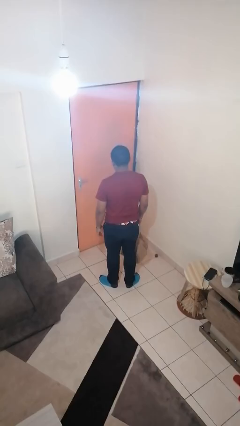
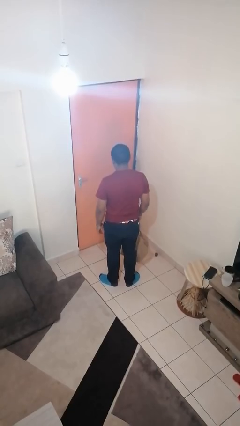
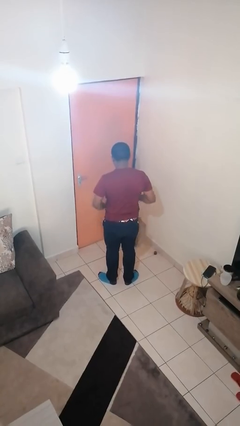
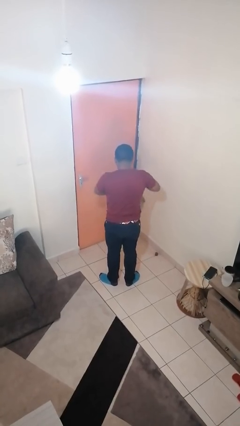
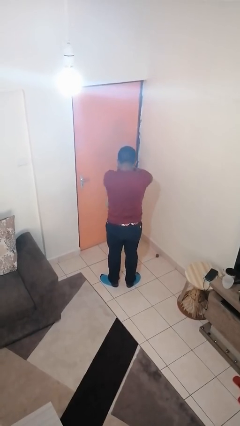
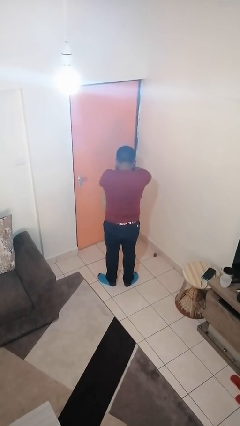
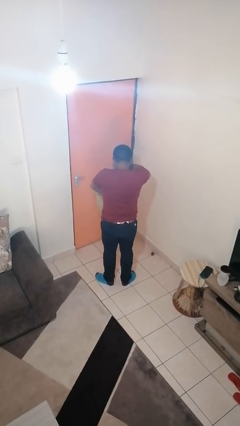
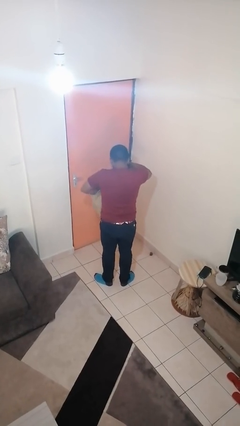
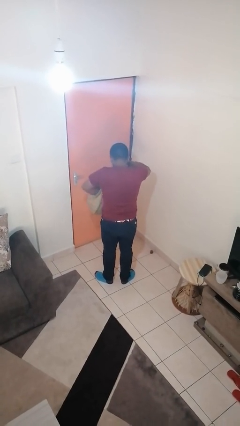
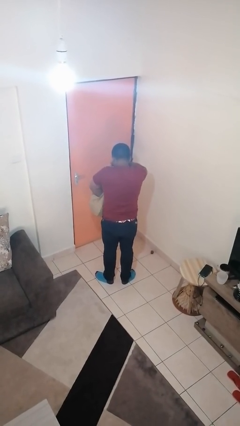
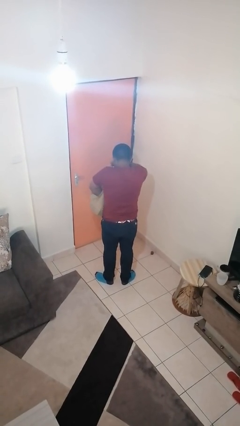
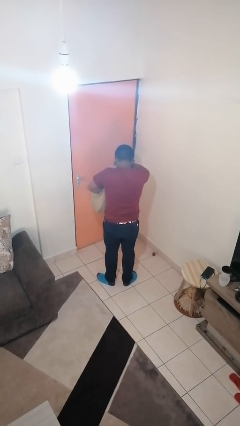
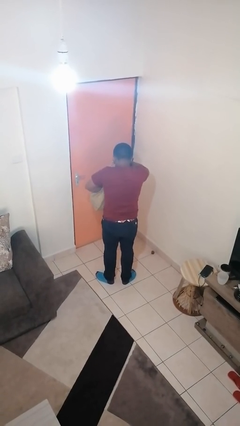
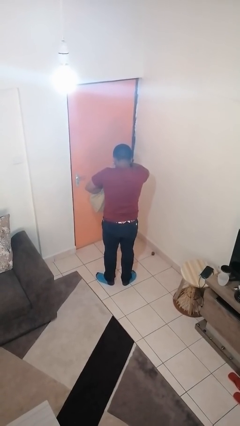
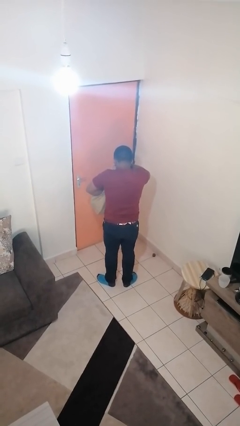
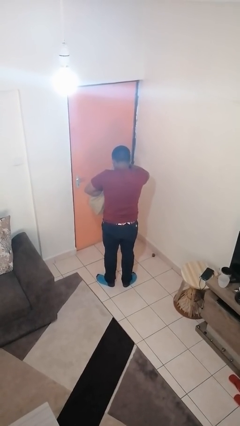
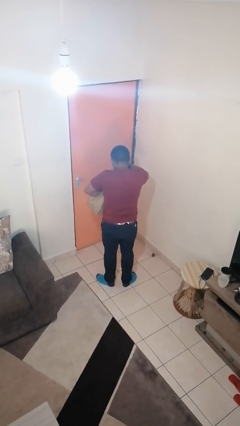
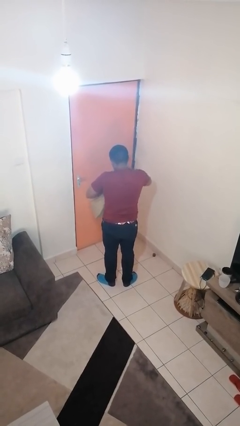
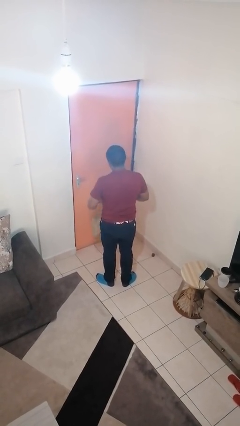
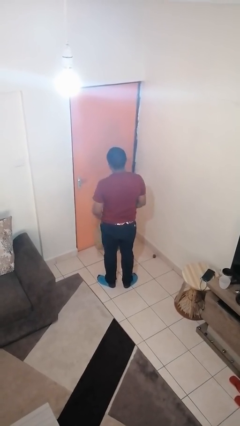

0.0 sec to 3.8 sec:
person searches in bag

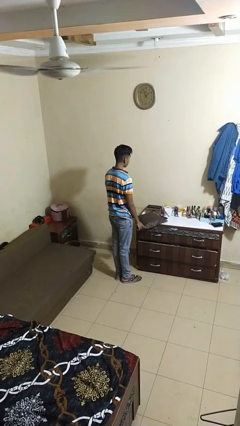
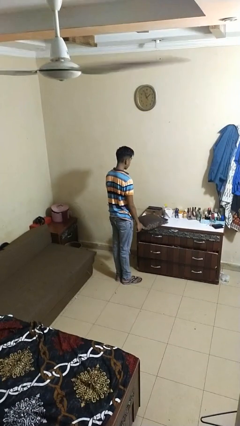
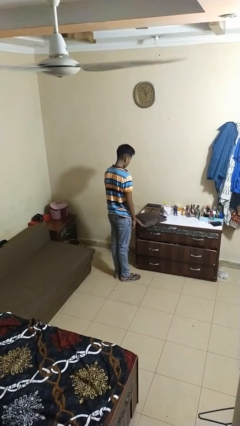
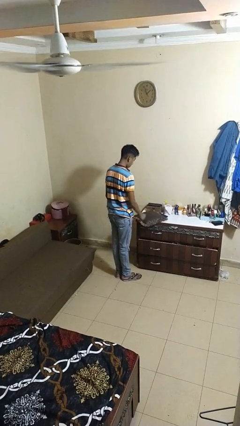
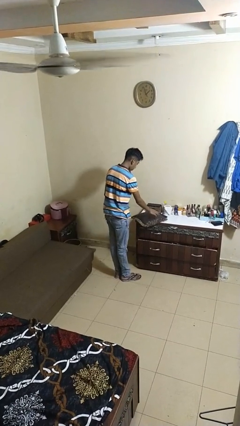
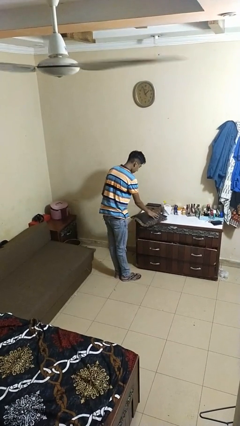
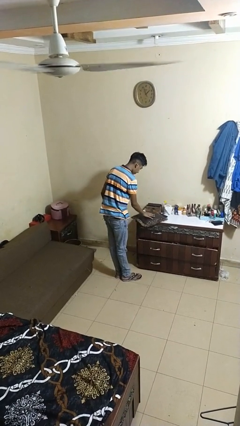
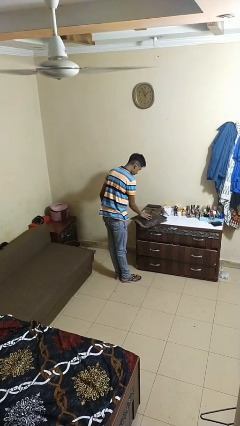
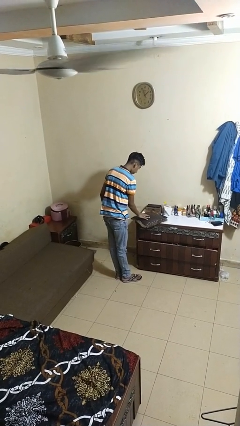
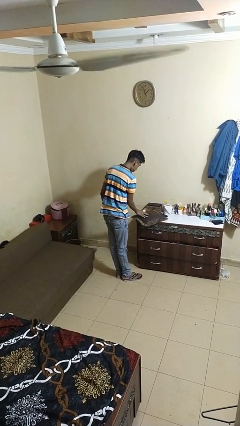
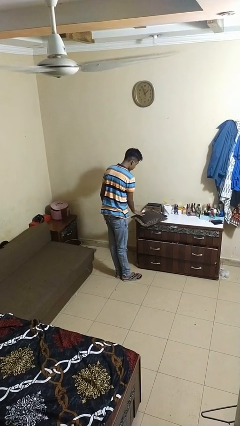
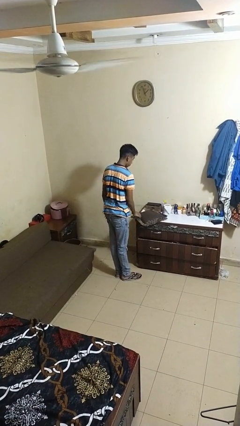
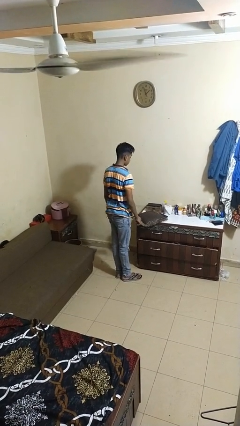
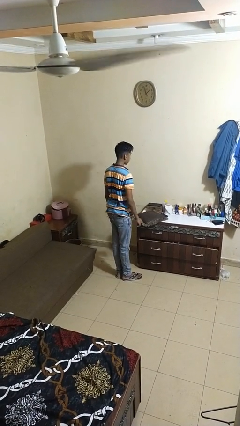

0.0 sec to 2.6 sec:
person waves hand over object

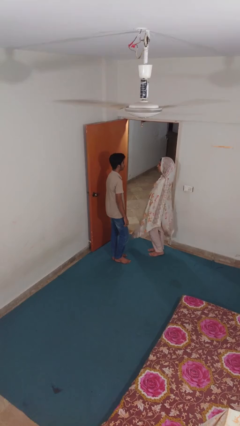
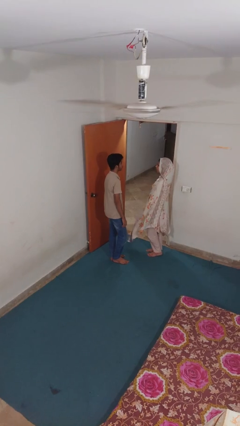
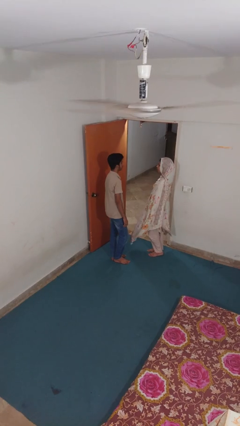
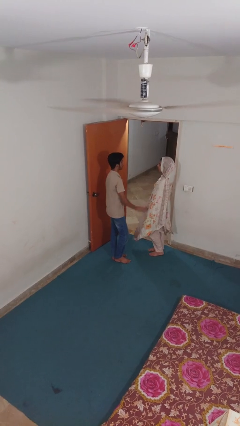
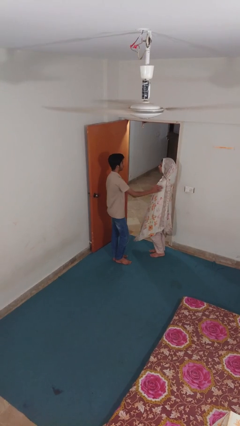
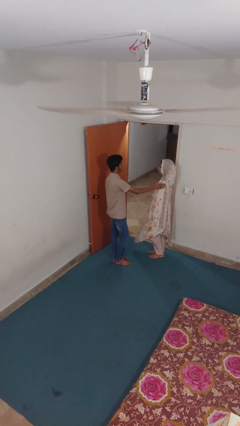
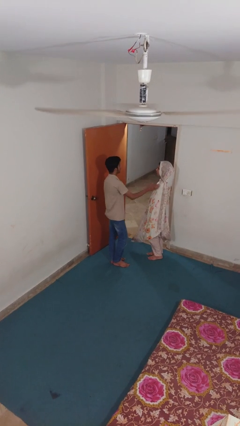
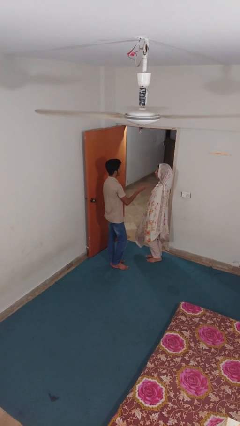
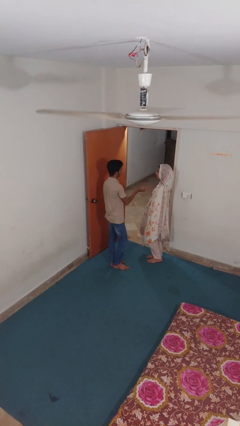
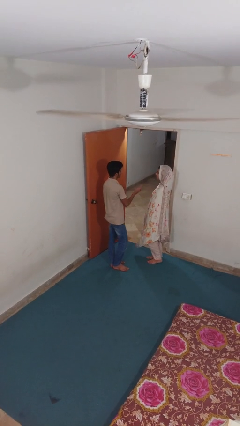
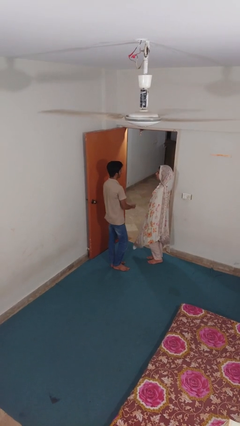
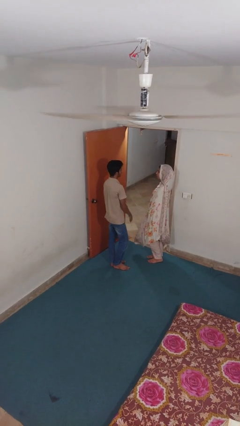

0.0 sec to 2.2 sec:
person shoves person

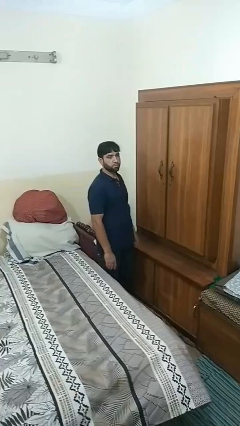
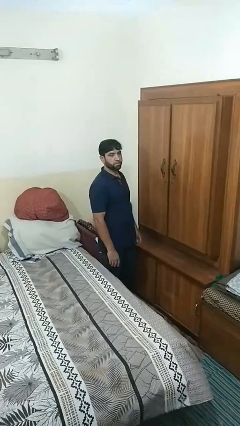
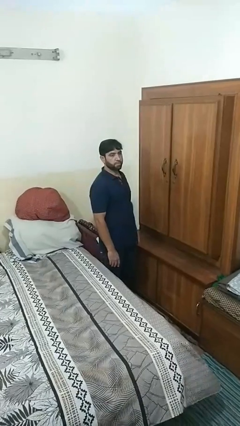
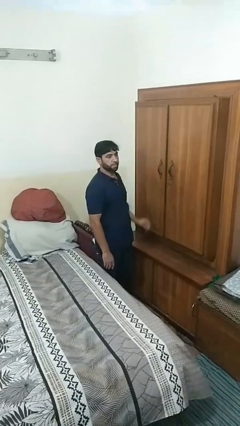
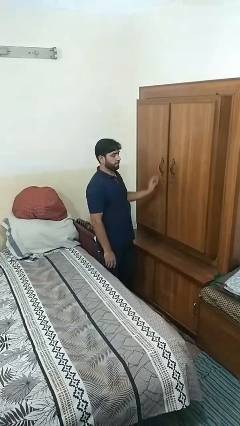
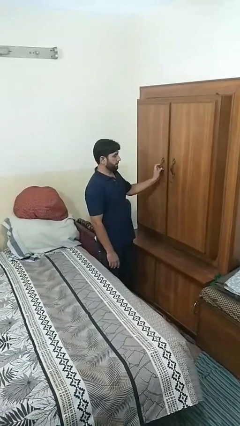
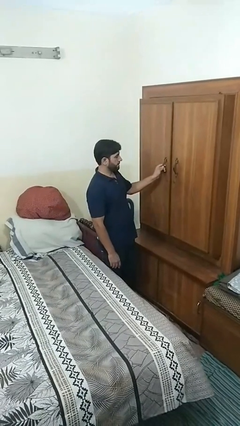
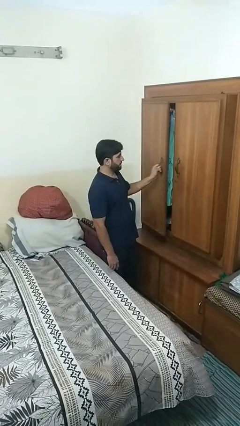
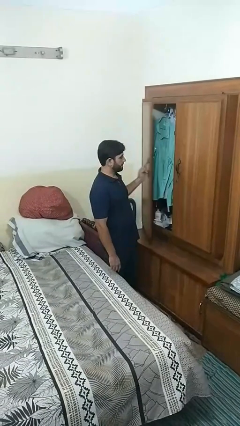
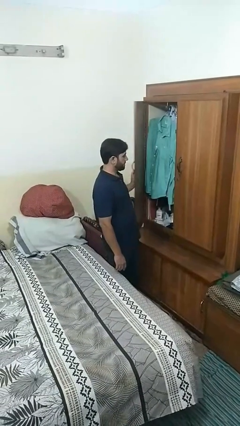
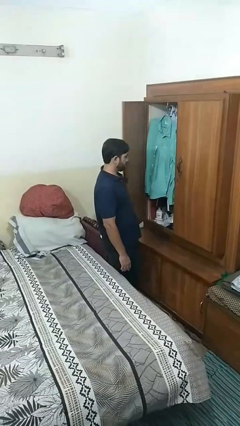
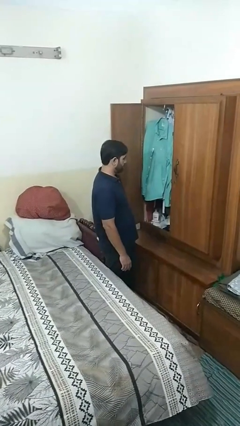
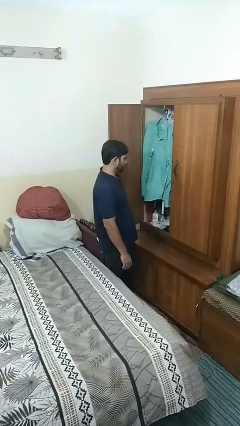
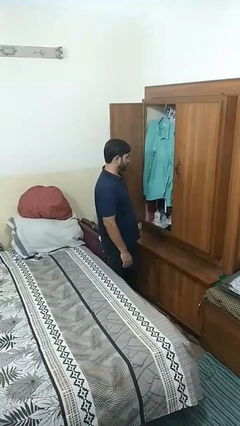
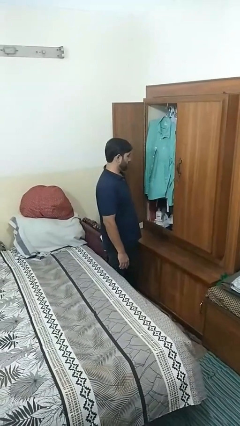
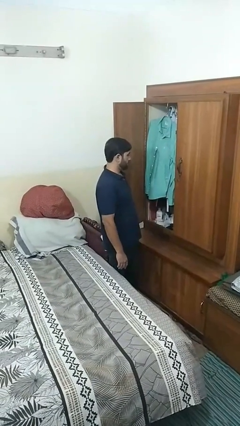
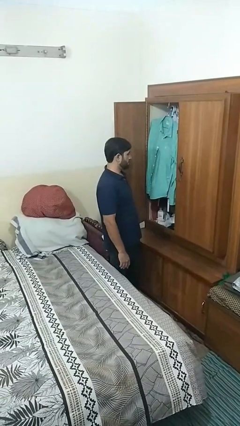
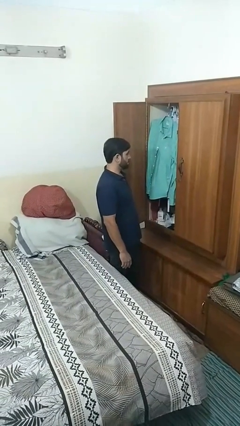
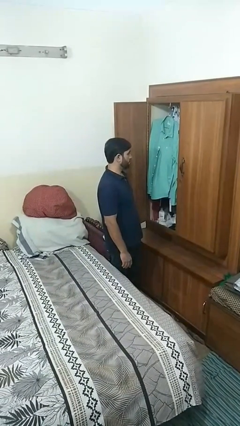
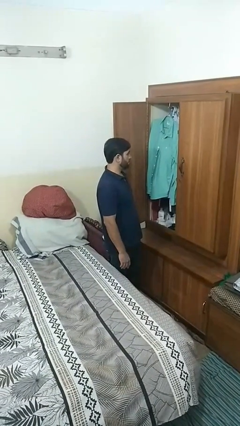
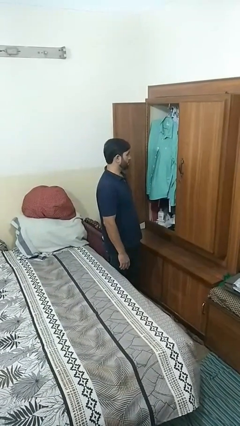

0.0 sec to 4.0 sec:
person opens closet door

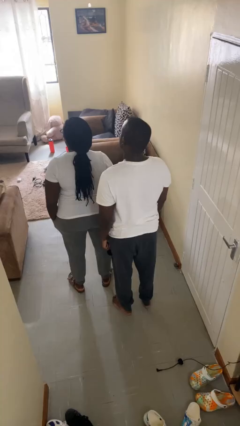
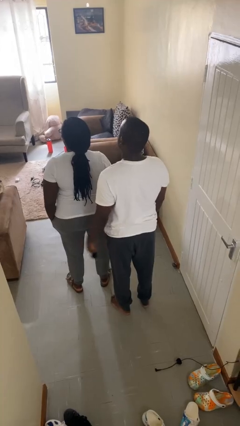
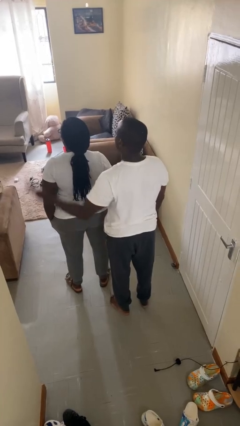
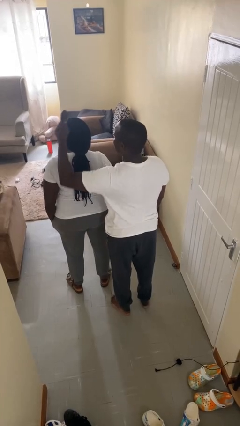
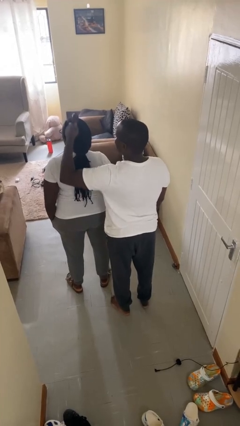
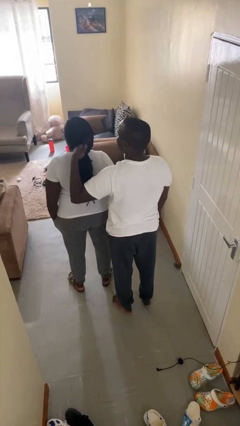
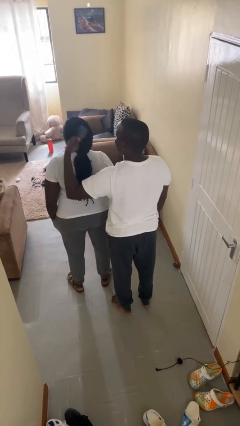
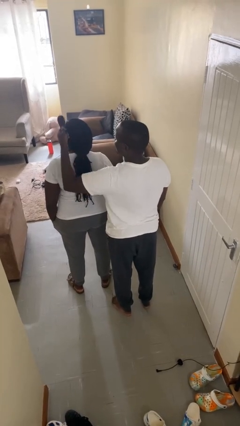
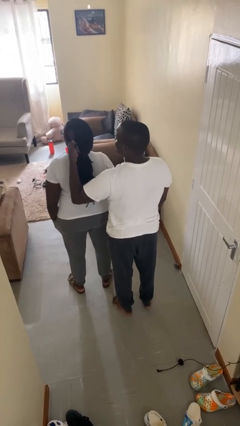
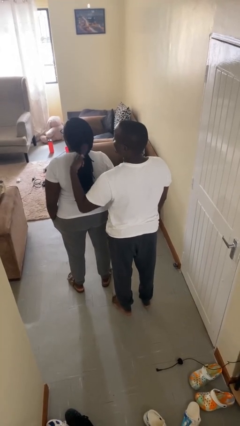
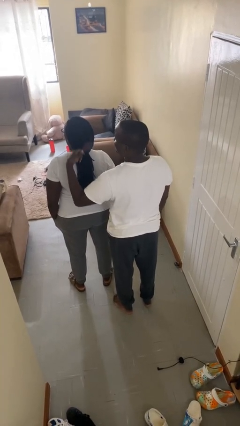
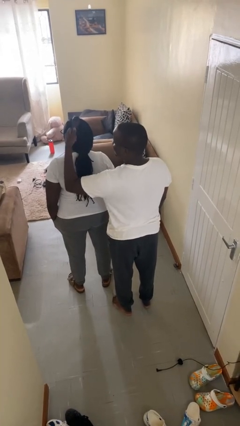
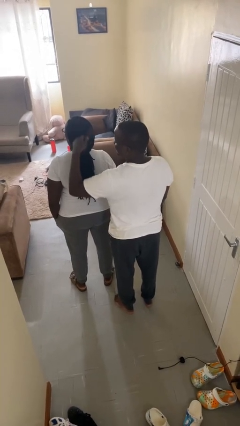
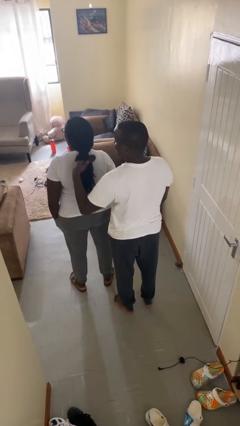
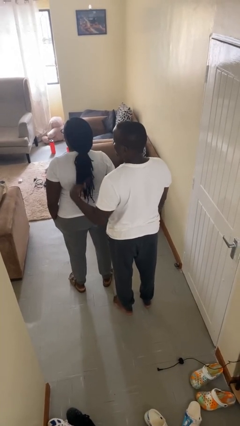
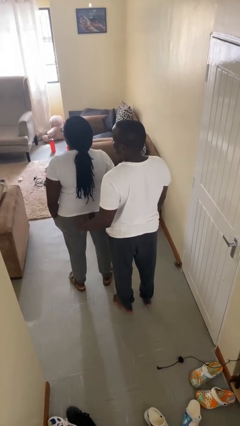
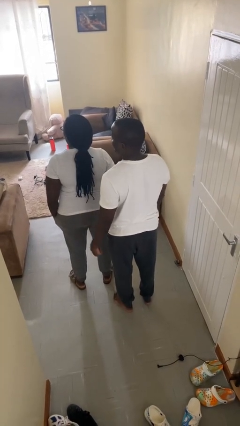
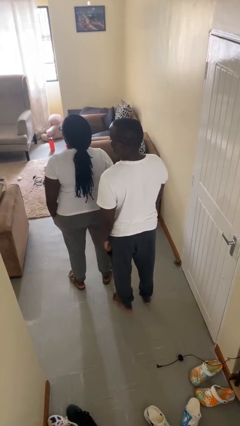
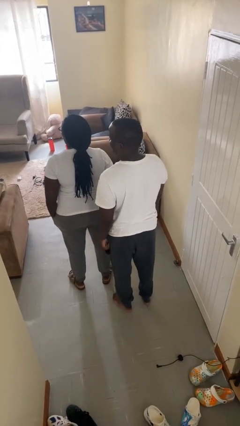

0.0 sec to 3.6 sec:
person brushes hair of person

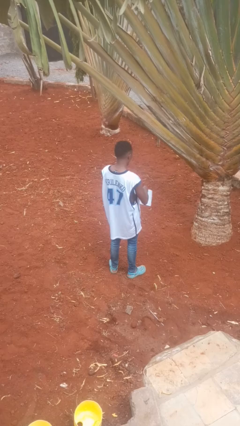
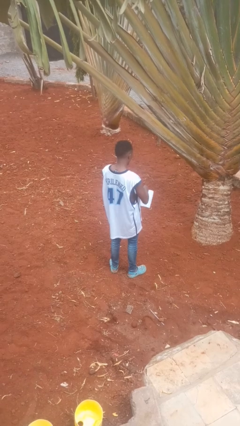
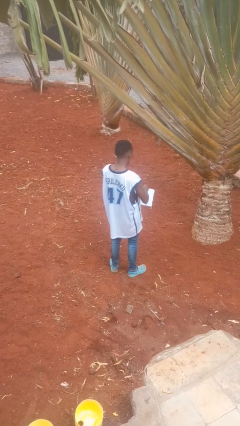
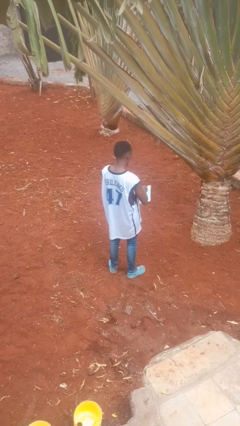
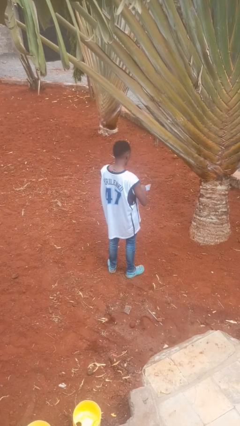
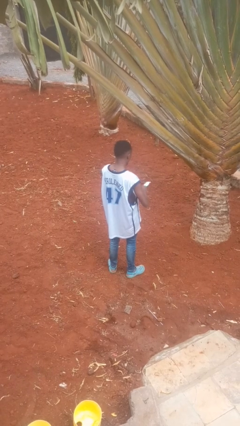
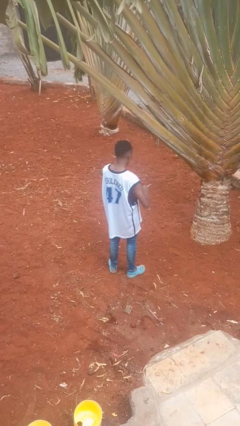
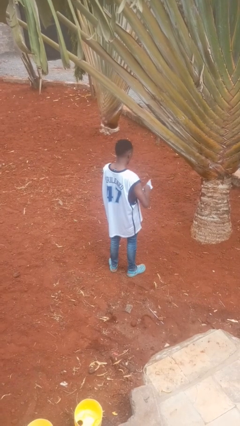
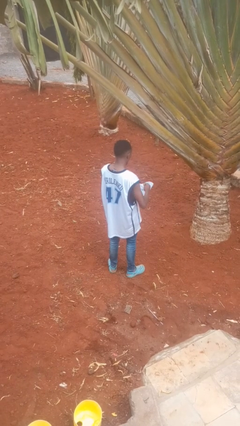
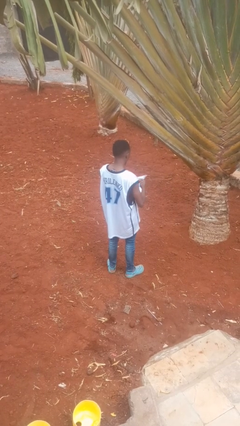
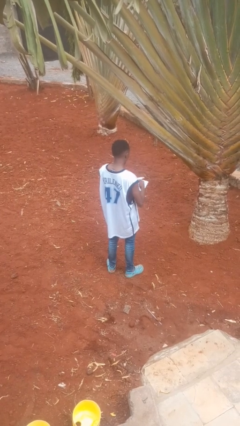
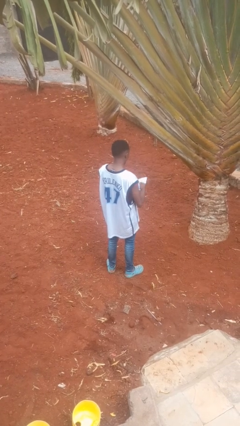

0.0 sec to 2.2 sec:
person tears paper
